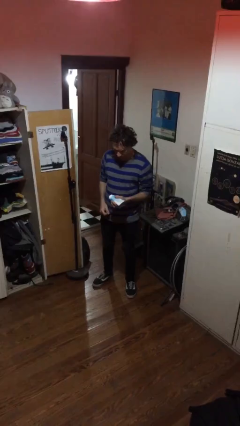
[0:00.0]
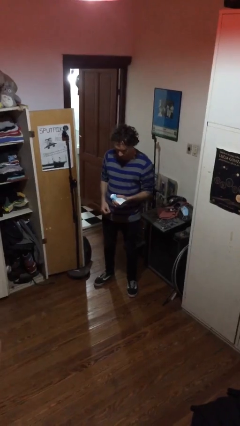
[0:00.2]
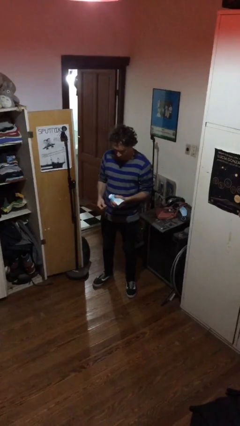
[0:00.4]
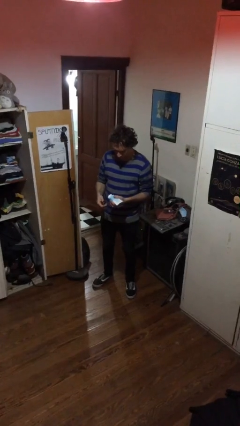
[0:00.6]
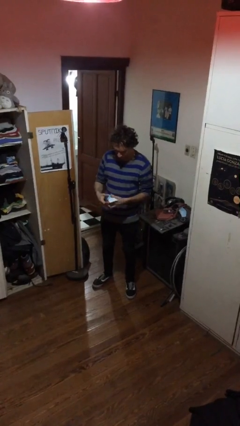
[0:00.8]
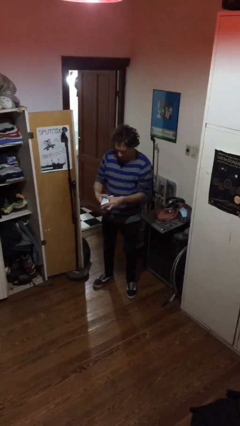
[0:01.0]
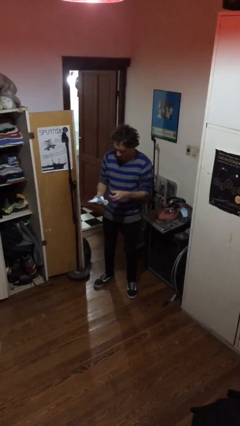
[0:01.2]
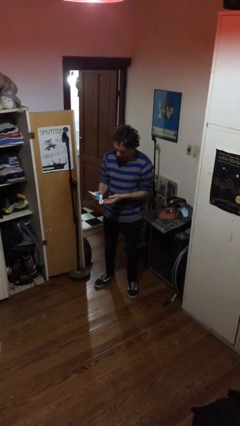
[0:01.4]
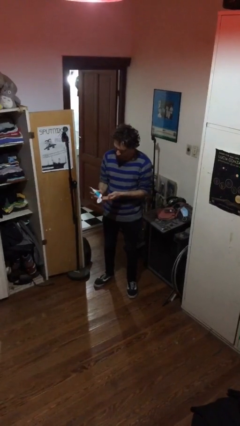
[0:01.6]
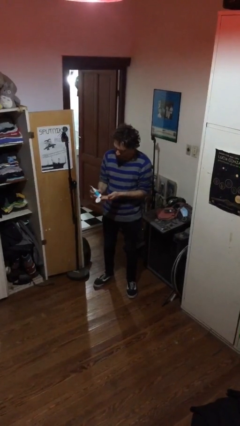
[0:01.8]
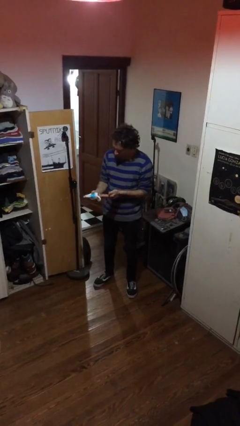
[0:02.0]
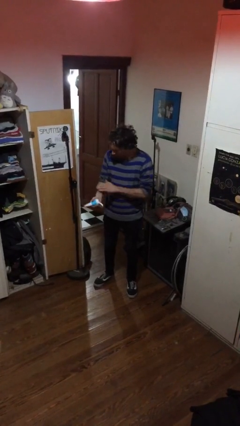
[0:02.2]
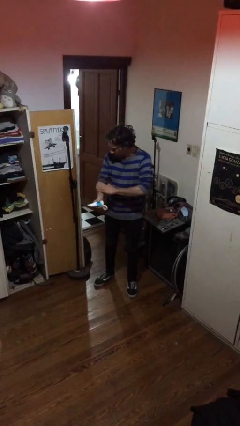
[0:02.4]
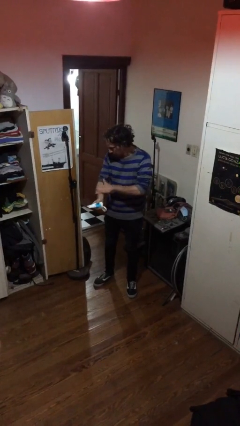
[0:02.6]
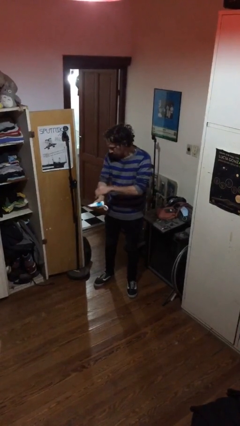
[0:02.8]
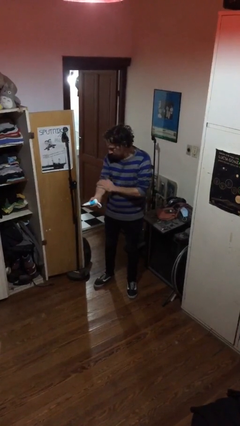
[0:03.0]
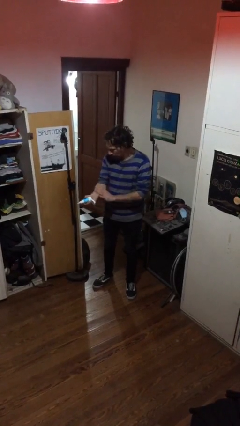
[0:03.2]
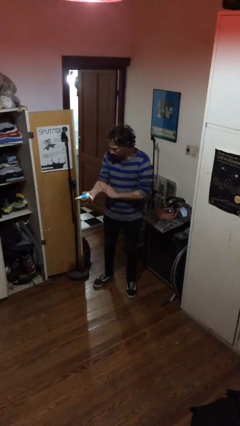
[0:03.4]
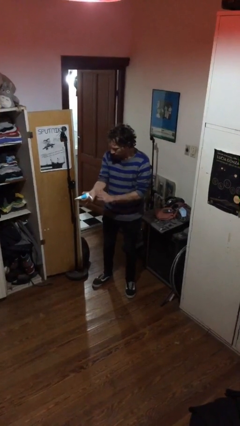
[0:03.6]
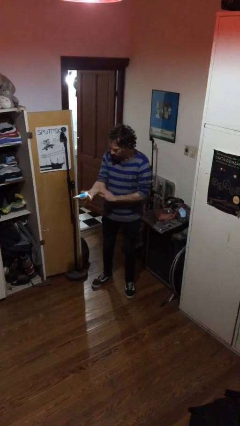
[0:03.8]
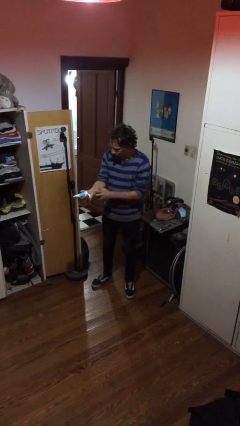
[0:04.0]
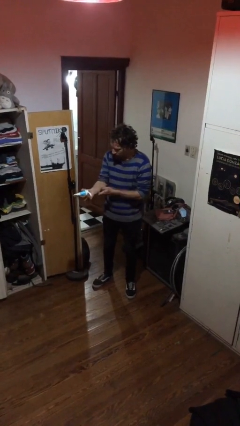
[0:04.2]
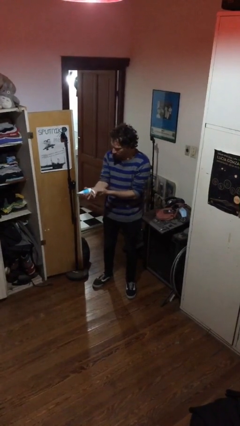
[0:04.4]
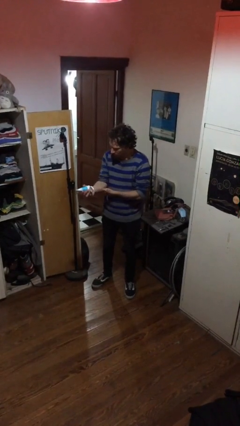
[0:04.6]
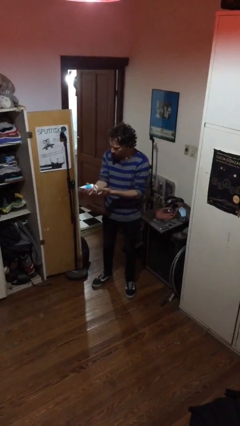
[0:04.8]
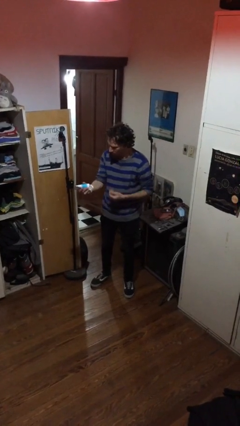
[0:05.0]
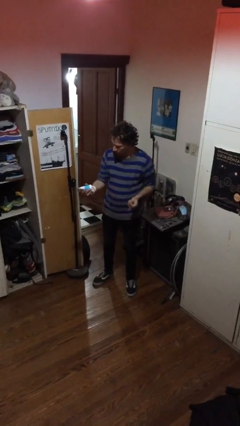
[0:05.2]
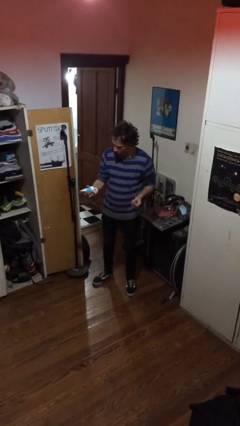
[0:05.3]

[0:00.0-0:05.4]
person applies sunscreen

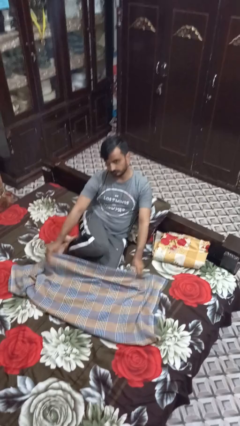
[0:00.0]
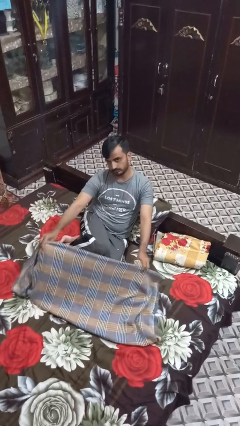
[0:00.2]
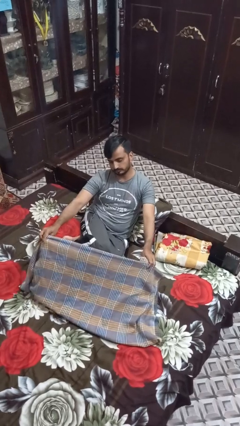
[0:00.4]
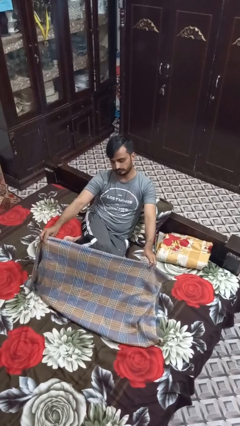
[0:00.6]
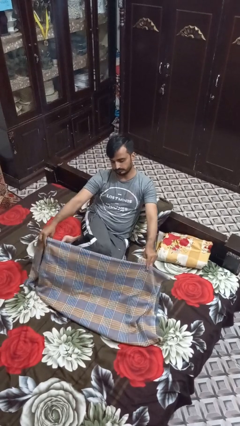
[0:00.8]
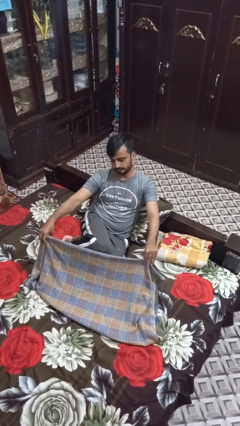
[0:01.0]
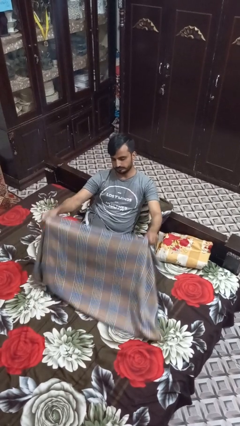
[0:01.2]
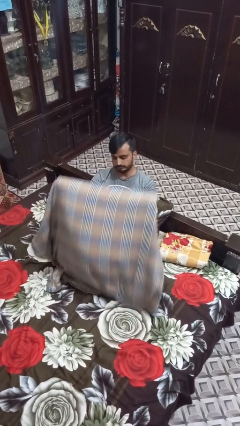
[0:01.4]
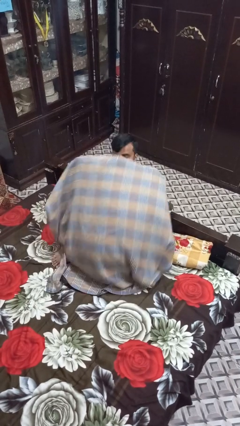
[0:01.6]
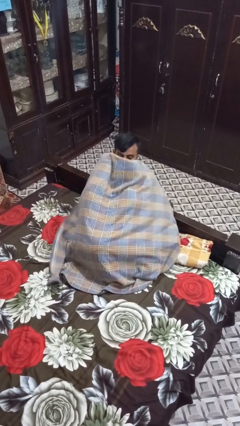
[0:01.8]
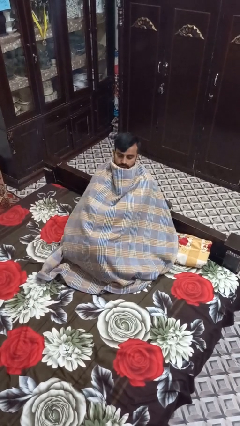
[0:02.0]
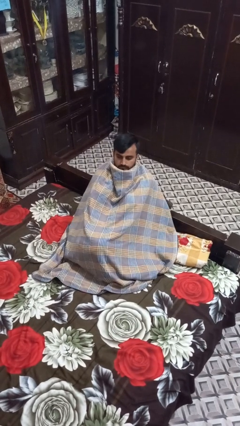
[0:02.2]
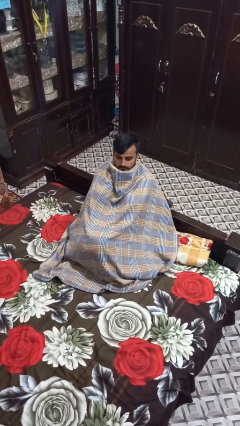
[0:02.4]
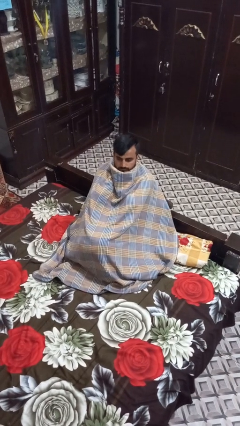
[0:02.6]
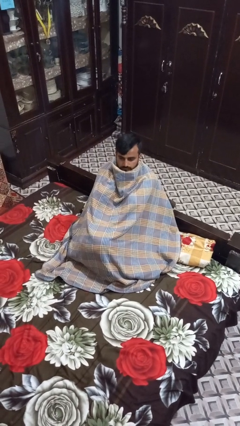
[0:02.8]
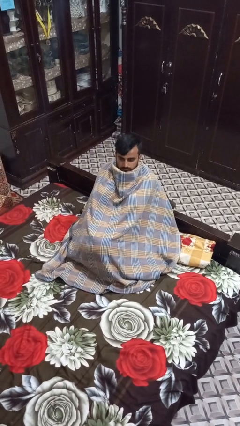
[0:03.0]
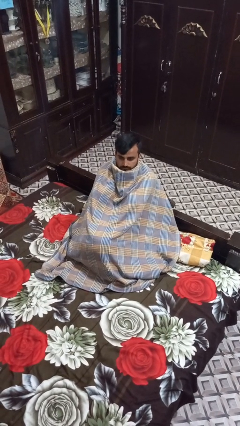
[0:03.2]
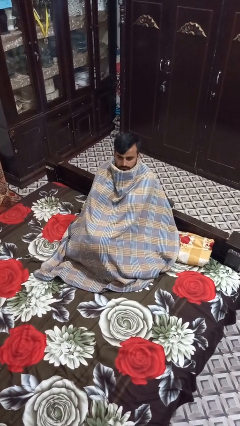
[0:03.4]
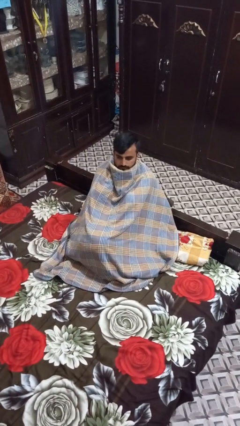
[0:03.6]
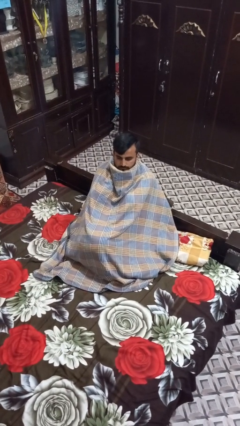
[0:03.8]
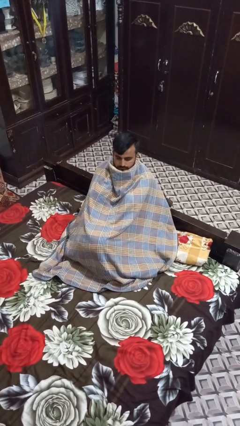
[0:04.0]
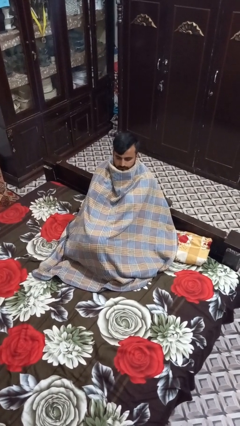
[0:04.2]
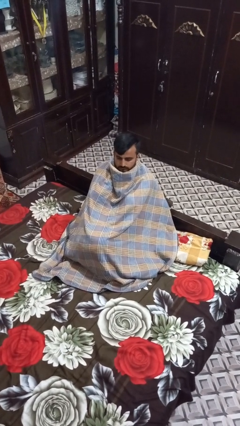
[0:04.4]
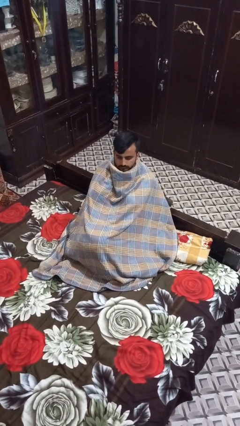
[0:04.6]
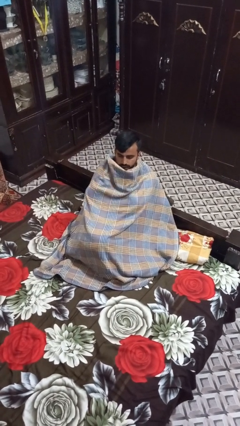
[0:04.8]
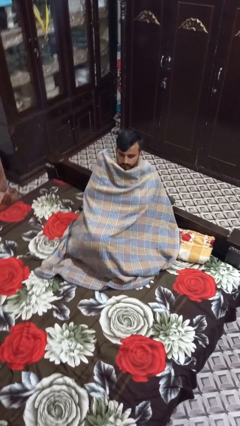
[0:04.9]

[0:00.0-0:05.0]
person covers with blanket

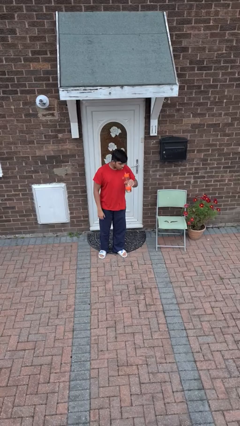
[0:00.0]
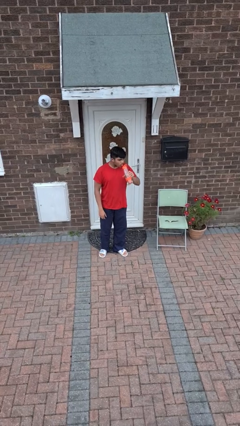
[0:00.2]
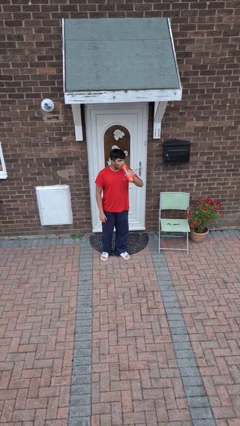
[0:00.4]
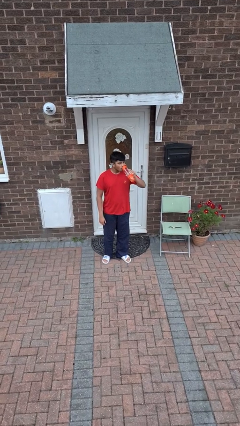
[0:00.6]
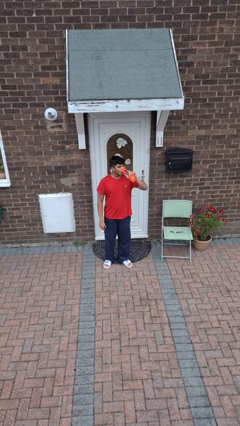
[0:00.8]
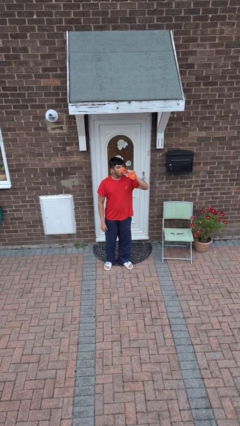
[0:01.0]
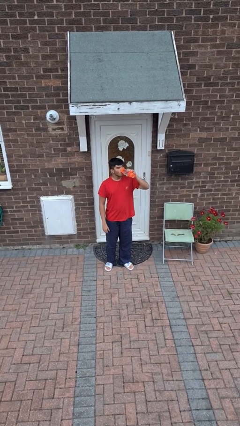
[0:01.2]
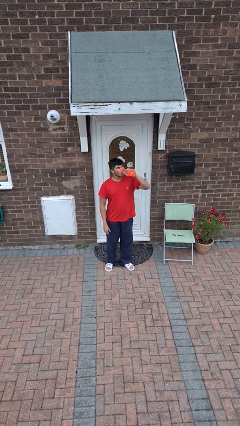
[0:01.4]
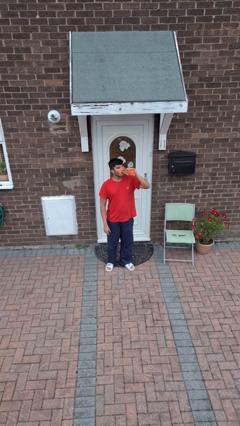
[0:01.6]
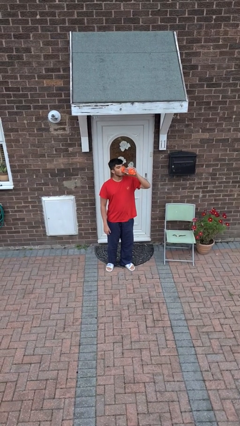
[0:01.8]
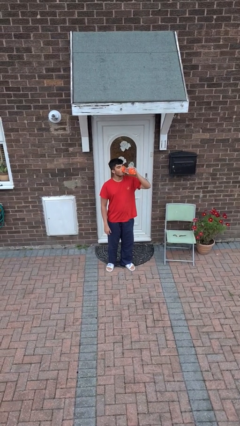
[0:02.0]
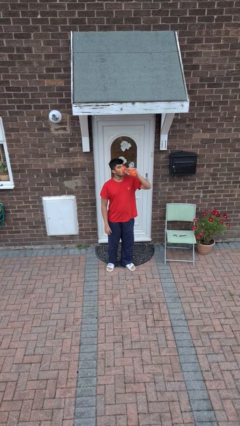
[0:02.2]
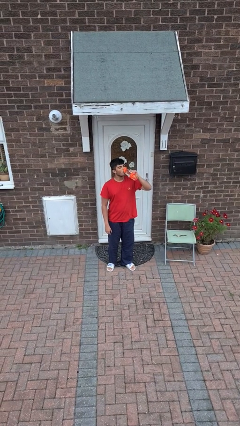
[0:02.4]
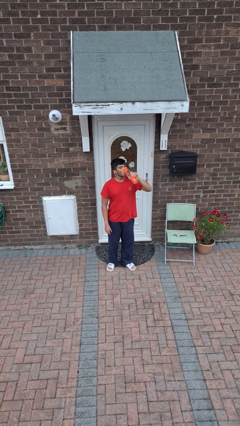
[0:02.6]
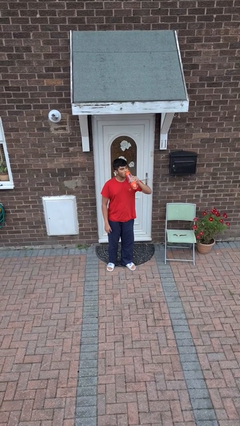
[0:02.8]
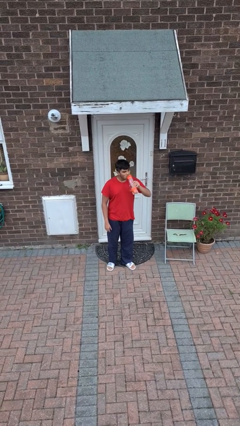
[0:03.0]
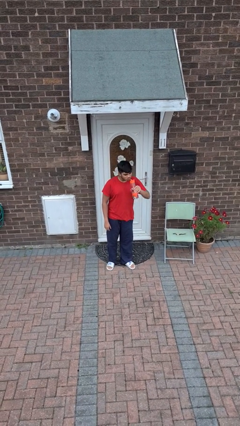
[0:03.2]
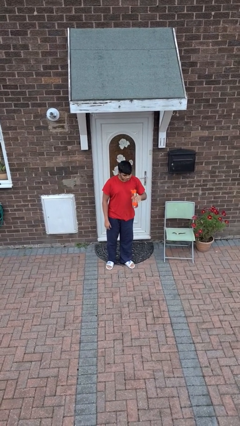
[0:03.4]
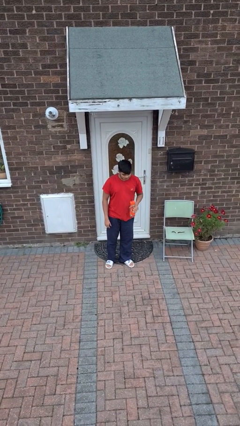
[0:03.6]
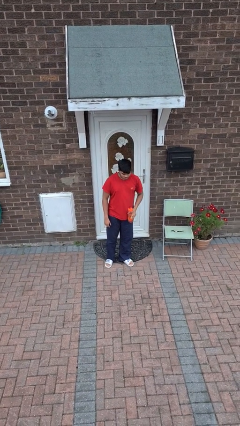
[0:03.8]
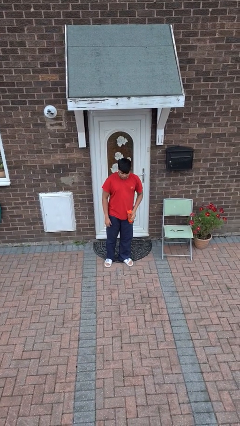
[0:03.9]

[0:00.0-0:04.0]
person drinks from bottle

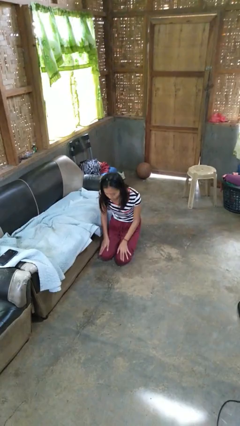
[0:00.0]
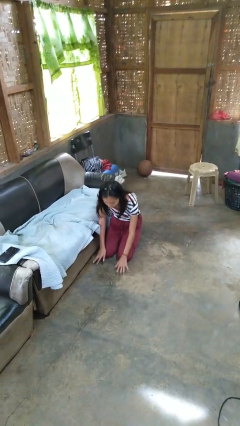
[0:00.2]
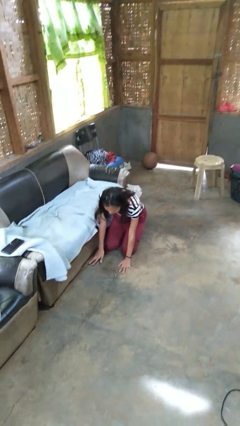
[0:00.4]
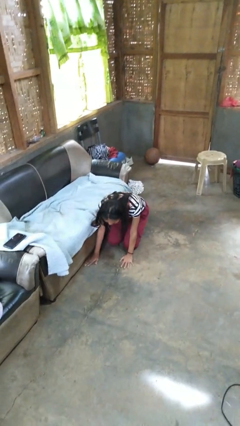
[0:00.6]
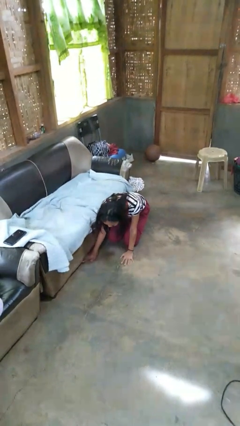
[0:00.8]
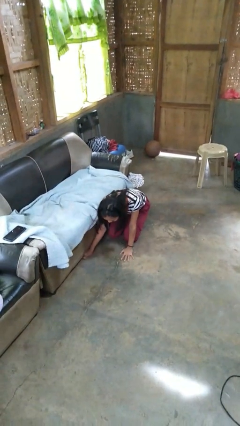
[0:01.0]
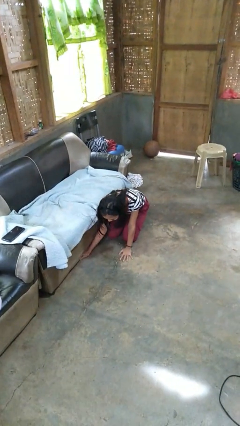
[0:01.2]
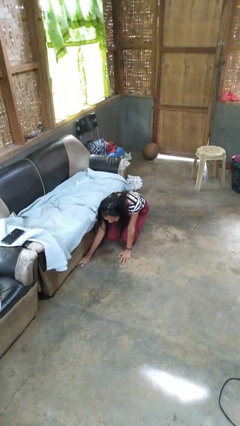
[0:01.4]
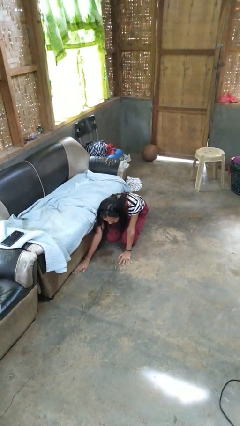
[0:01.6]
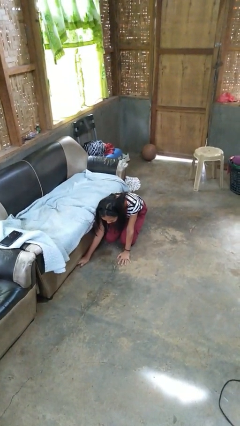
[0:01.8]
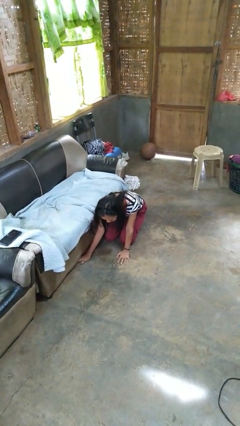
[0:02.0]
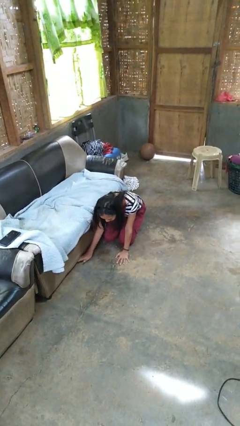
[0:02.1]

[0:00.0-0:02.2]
person searches under couch

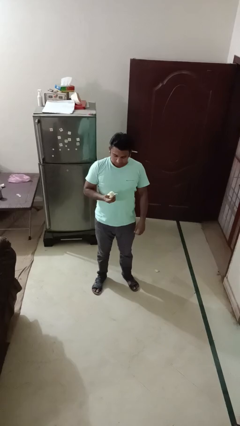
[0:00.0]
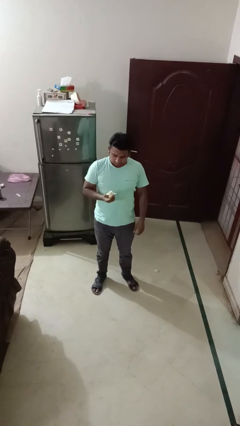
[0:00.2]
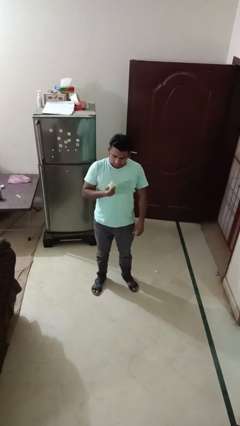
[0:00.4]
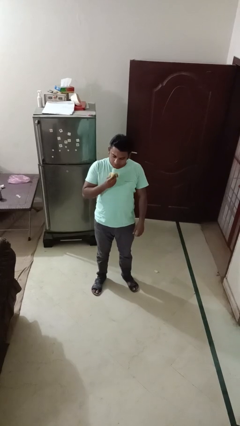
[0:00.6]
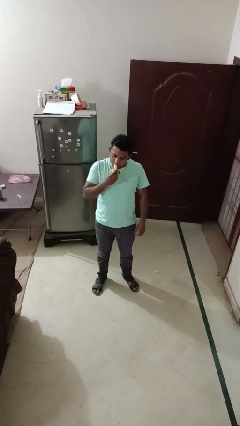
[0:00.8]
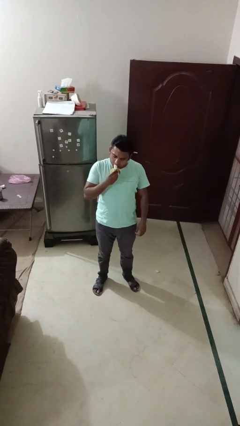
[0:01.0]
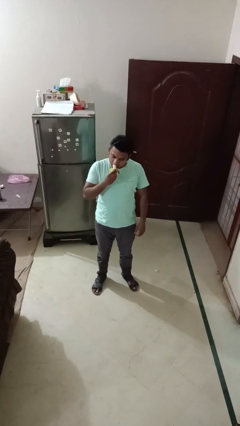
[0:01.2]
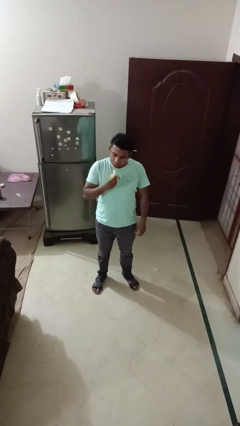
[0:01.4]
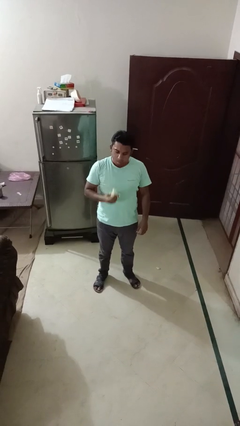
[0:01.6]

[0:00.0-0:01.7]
person eats banana
